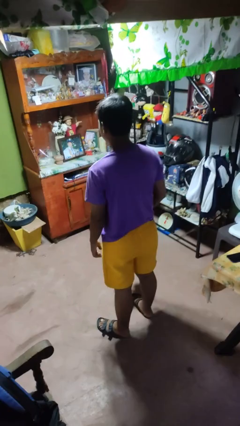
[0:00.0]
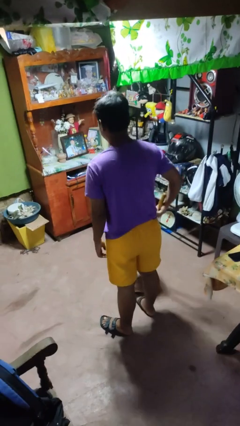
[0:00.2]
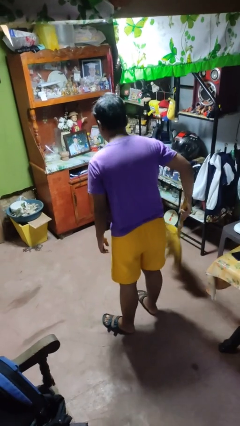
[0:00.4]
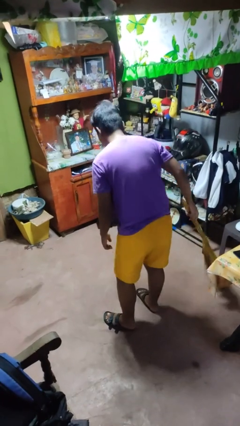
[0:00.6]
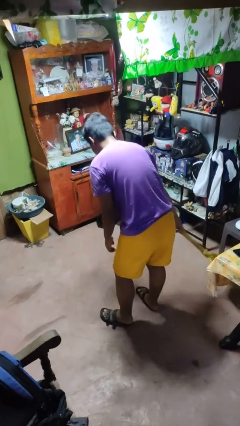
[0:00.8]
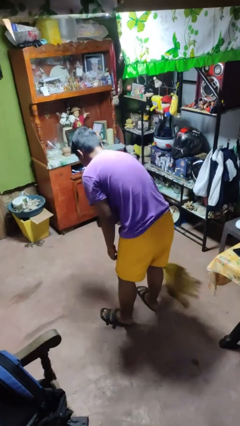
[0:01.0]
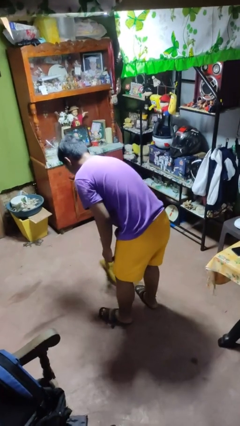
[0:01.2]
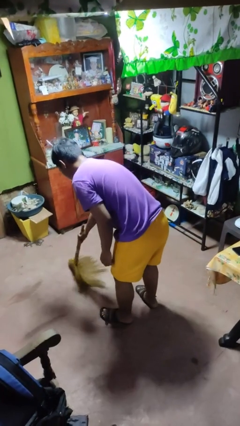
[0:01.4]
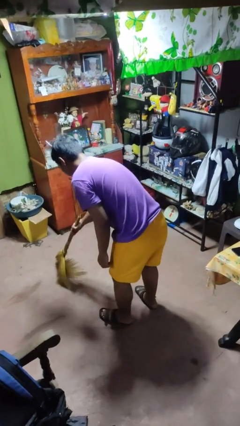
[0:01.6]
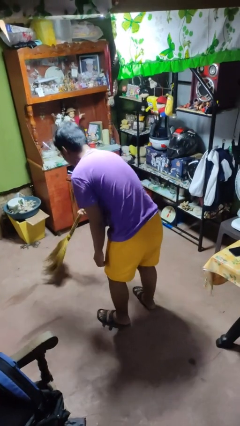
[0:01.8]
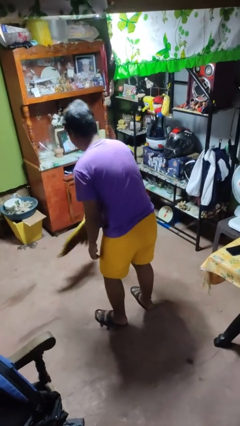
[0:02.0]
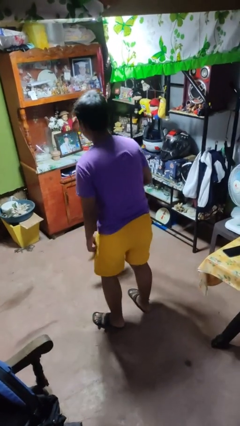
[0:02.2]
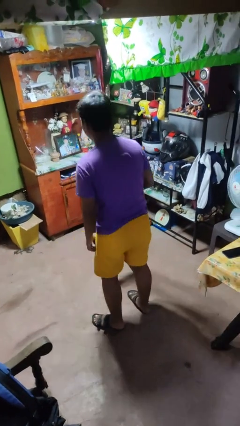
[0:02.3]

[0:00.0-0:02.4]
person sweeps floor

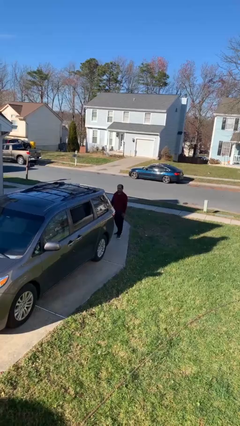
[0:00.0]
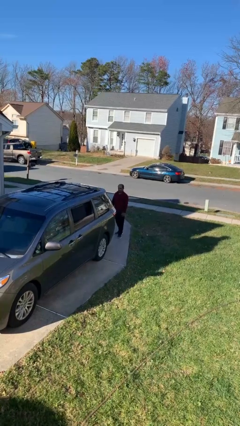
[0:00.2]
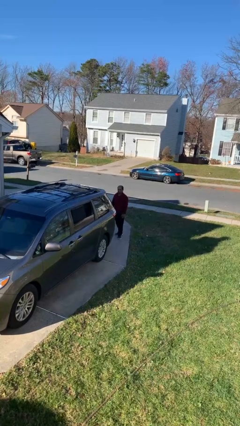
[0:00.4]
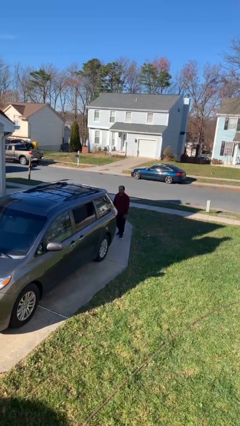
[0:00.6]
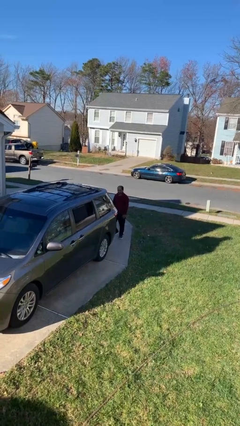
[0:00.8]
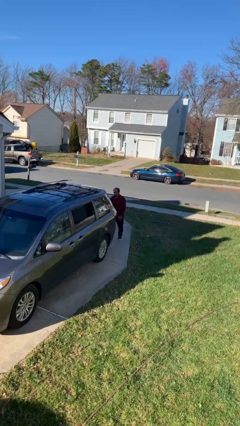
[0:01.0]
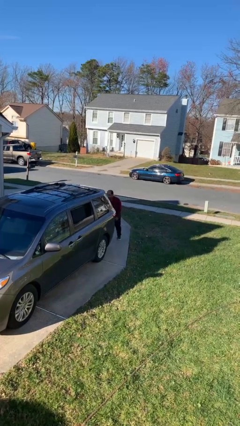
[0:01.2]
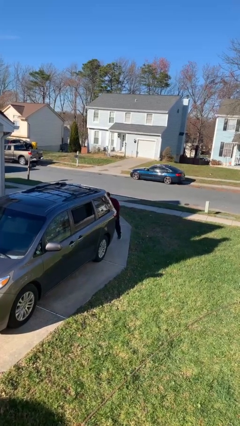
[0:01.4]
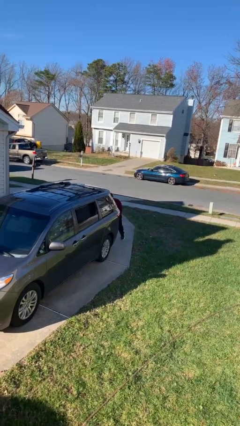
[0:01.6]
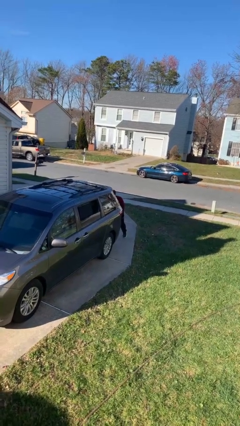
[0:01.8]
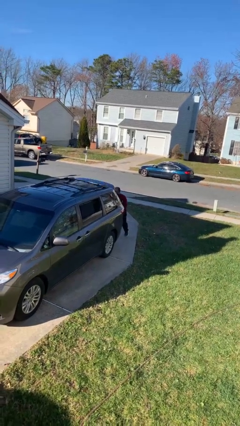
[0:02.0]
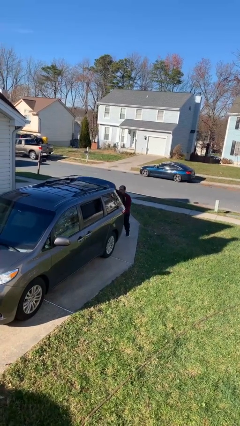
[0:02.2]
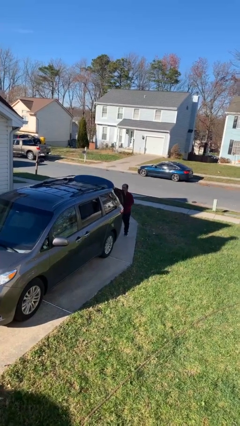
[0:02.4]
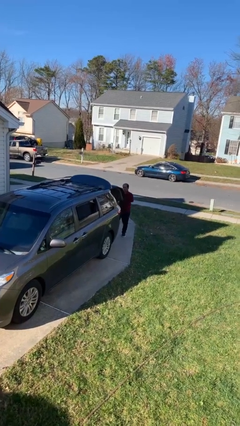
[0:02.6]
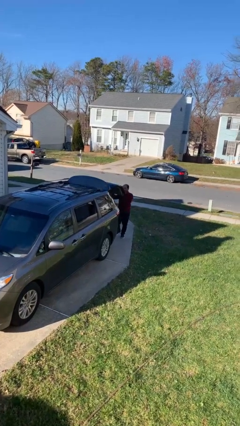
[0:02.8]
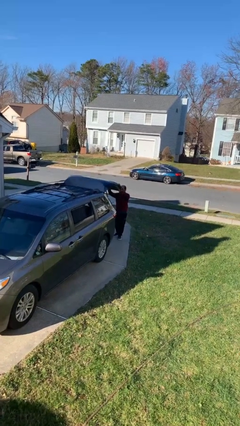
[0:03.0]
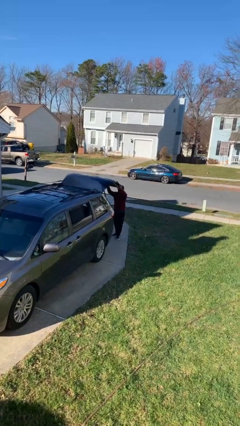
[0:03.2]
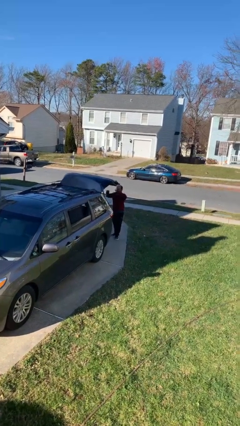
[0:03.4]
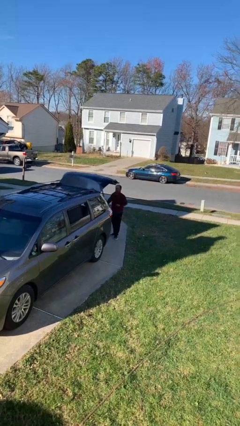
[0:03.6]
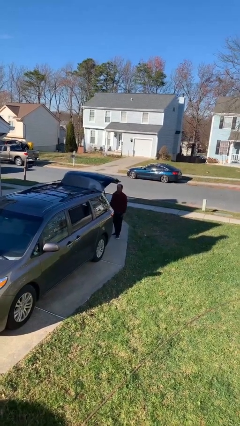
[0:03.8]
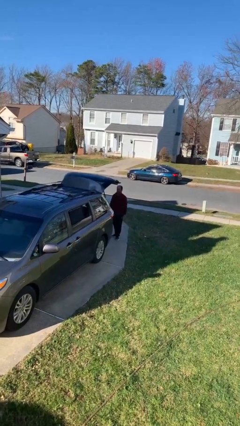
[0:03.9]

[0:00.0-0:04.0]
person opens car trunk

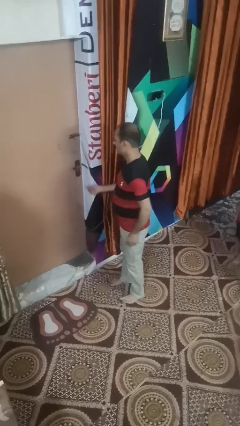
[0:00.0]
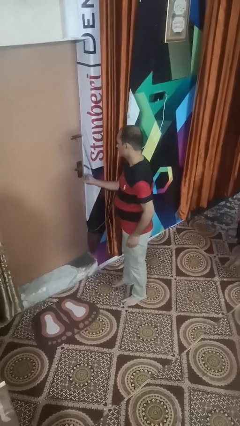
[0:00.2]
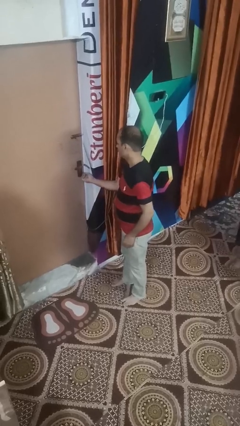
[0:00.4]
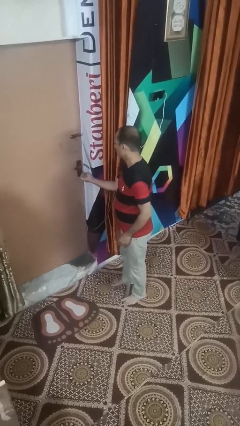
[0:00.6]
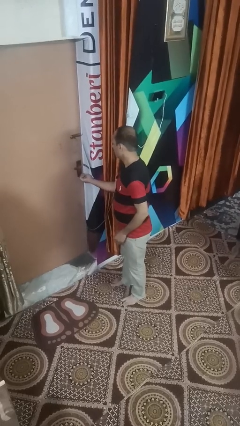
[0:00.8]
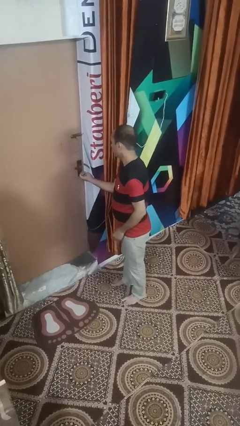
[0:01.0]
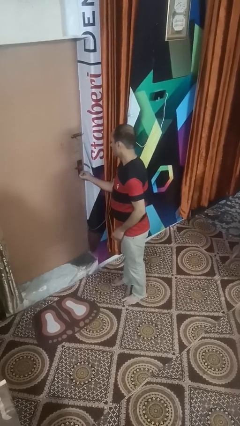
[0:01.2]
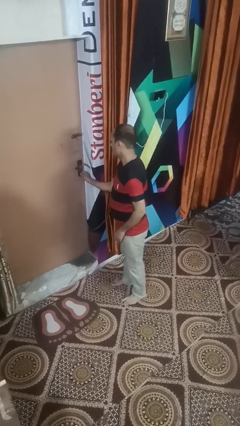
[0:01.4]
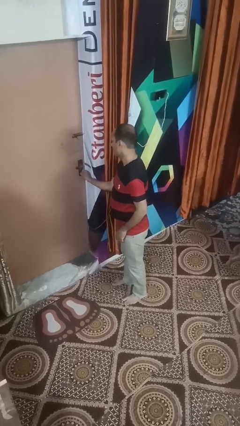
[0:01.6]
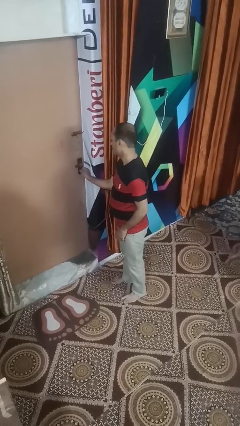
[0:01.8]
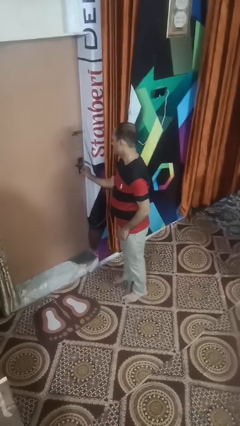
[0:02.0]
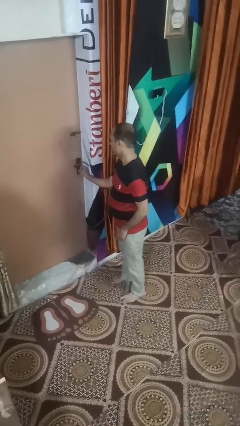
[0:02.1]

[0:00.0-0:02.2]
person locks door with keys

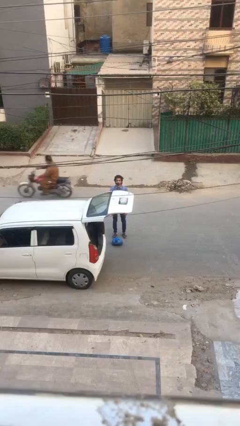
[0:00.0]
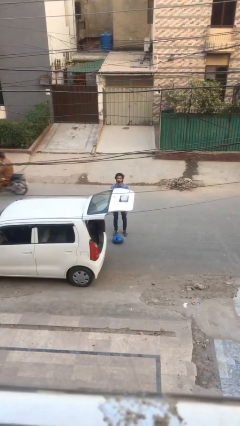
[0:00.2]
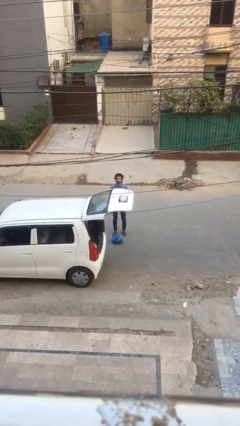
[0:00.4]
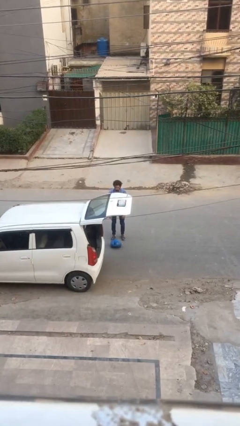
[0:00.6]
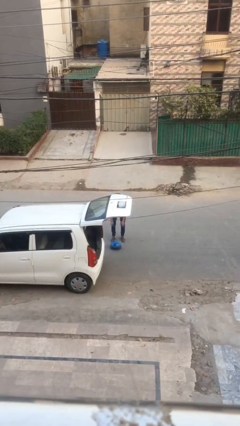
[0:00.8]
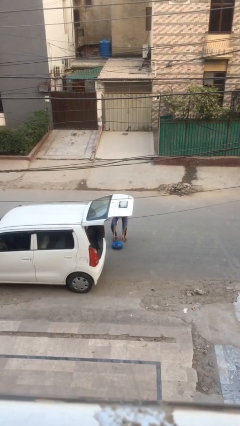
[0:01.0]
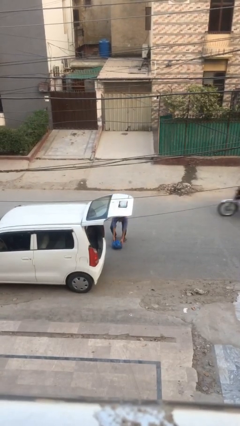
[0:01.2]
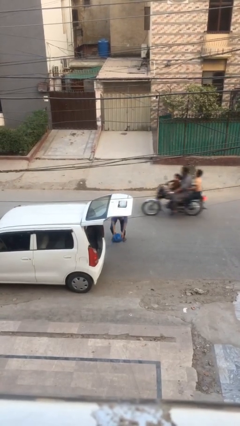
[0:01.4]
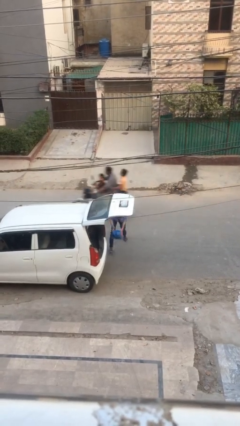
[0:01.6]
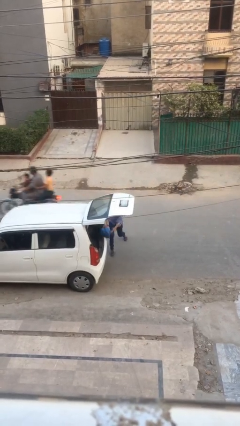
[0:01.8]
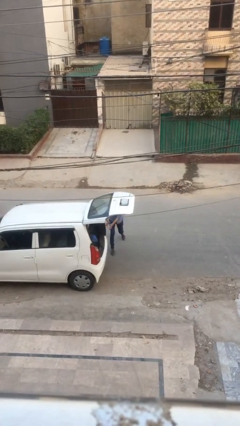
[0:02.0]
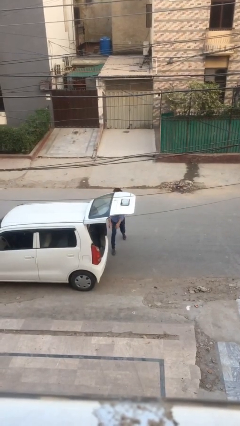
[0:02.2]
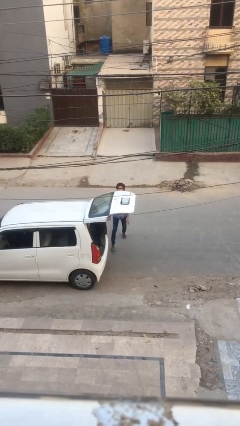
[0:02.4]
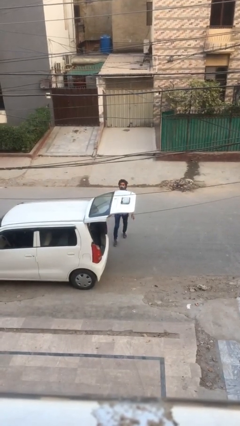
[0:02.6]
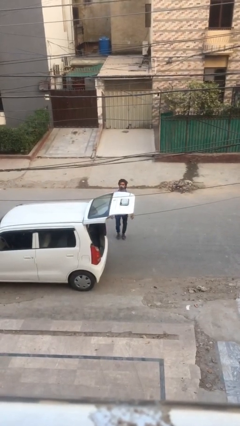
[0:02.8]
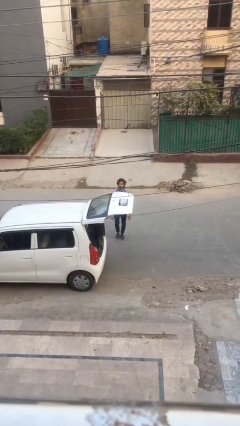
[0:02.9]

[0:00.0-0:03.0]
person loads car

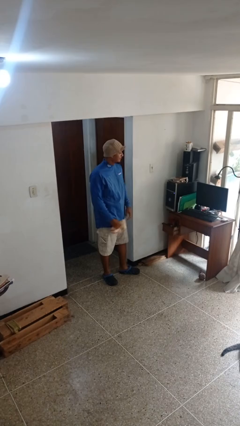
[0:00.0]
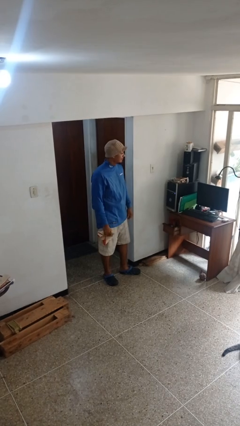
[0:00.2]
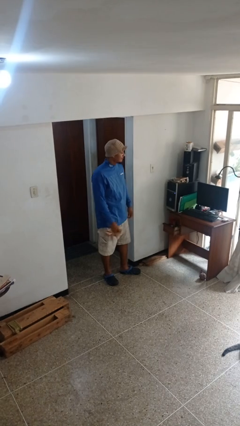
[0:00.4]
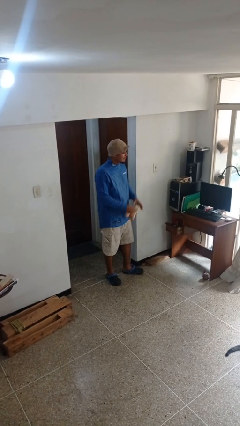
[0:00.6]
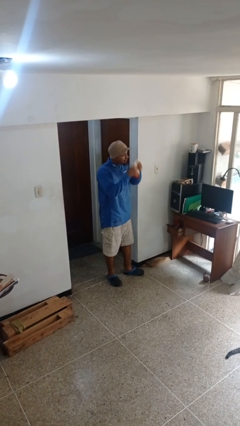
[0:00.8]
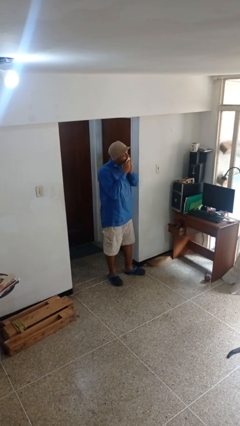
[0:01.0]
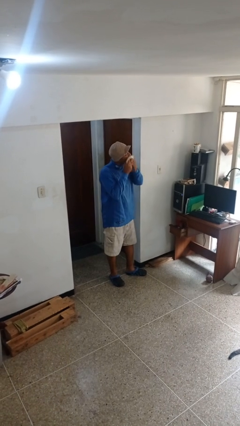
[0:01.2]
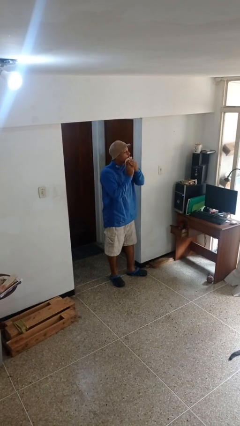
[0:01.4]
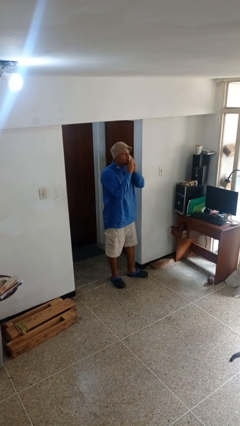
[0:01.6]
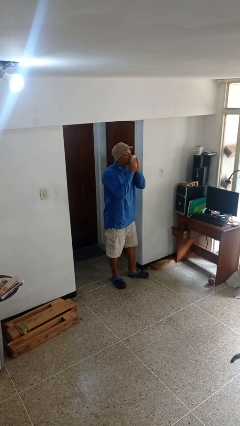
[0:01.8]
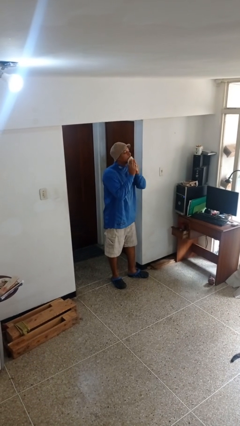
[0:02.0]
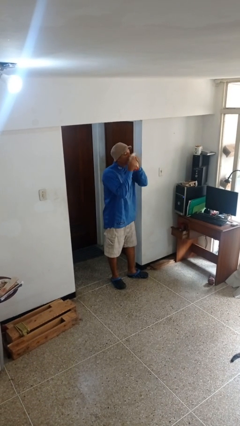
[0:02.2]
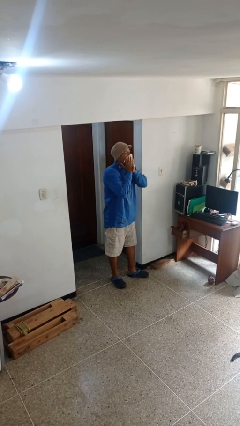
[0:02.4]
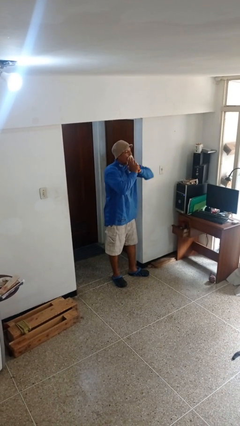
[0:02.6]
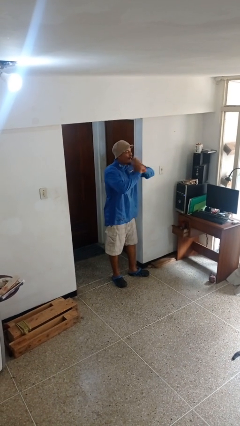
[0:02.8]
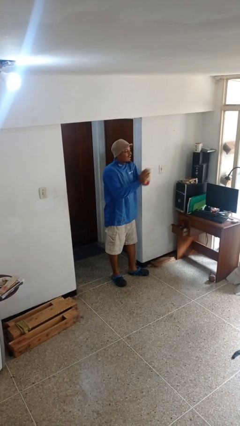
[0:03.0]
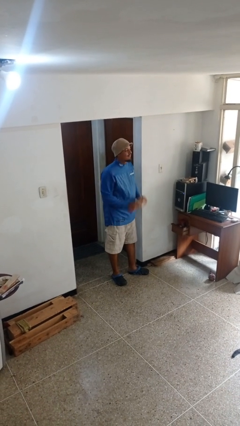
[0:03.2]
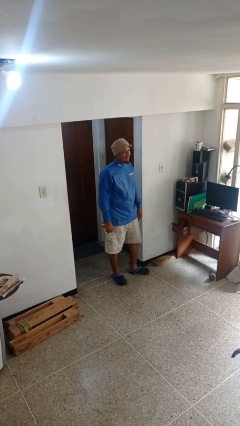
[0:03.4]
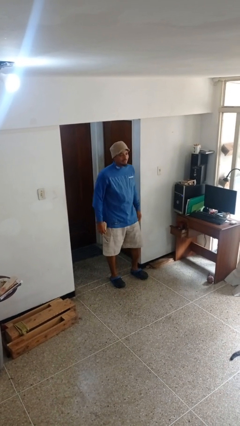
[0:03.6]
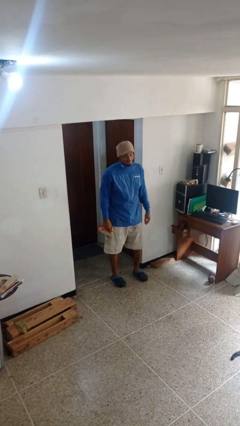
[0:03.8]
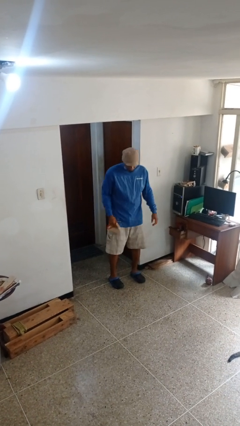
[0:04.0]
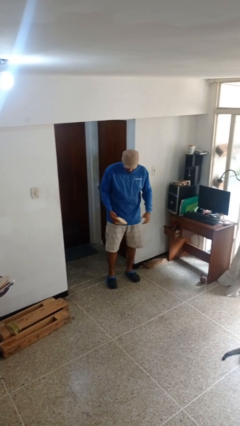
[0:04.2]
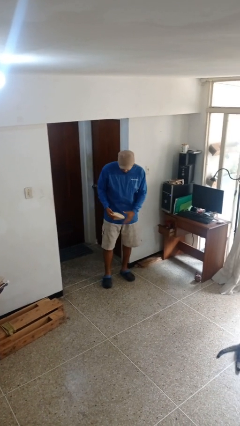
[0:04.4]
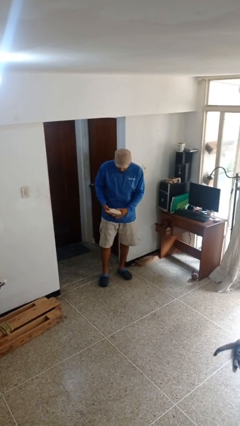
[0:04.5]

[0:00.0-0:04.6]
person wipes mouth with napkin

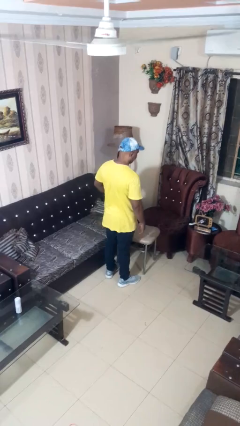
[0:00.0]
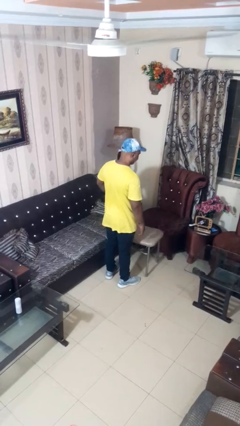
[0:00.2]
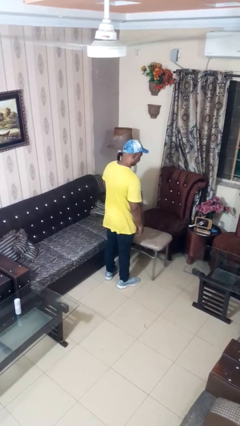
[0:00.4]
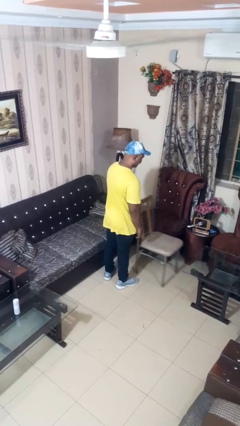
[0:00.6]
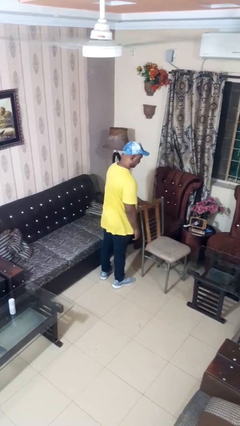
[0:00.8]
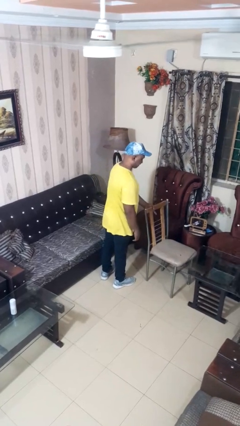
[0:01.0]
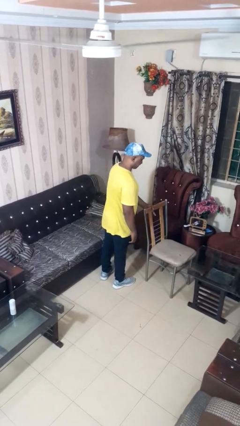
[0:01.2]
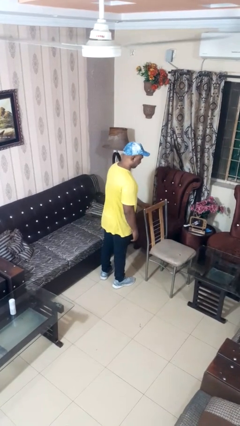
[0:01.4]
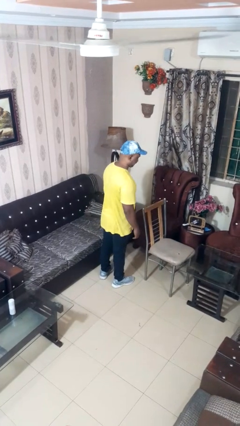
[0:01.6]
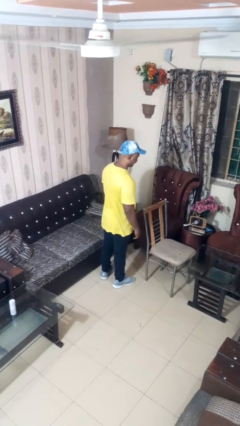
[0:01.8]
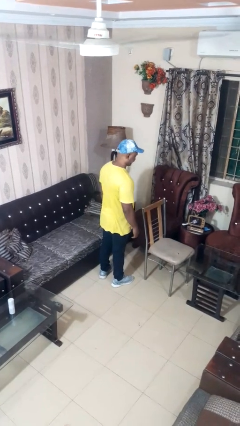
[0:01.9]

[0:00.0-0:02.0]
person pushes in chair
